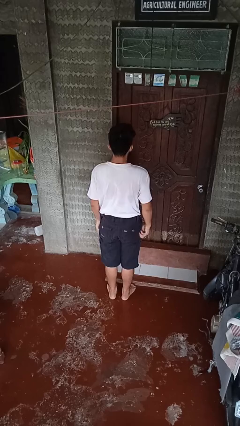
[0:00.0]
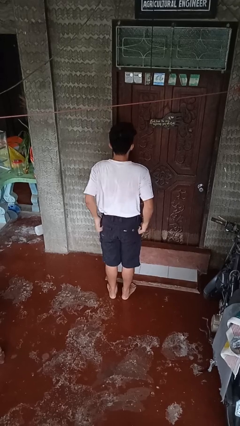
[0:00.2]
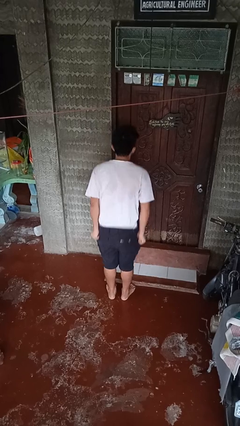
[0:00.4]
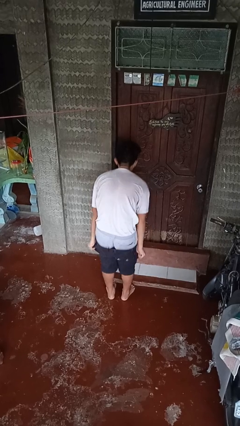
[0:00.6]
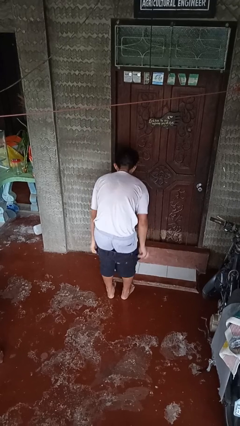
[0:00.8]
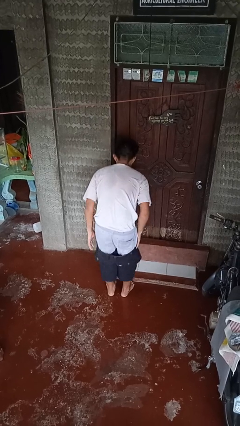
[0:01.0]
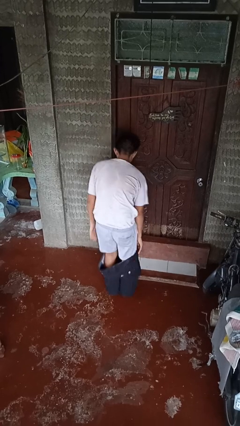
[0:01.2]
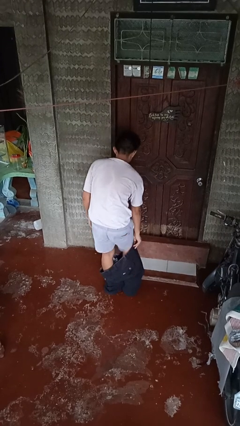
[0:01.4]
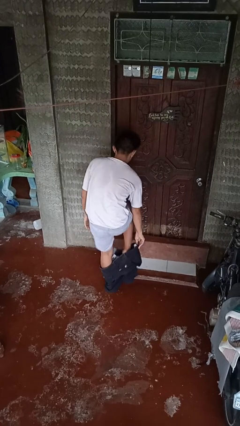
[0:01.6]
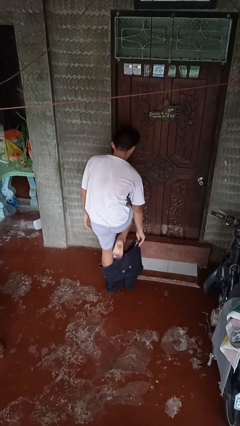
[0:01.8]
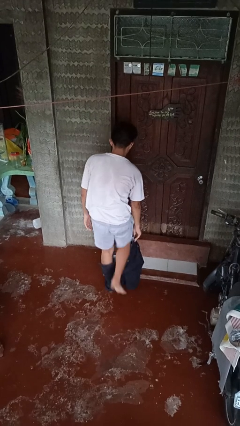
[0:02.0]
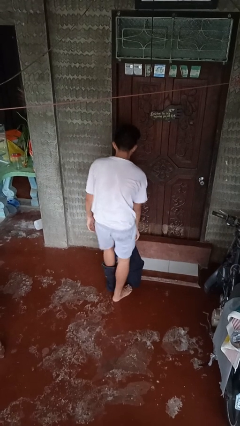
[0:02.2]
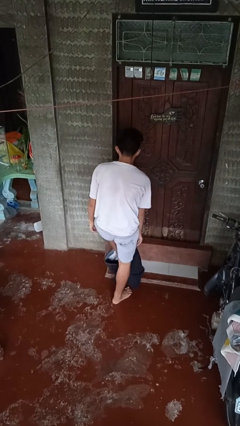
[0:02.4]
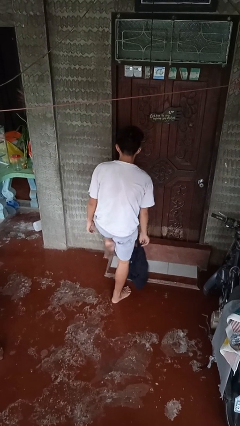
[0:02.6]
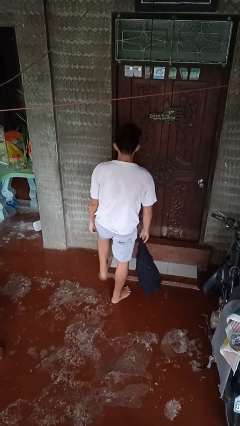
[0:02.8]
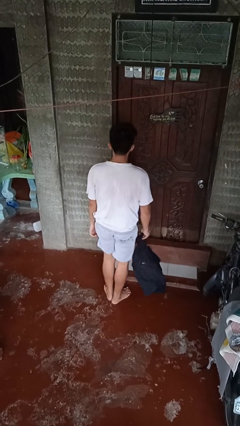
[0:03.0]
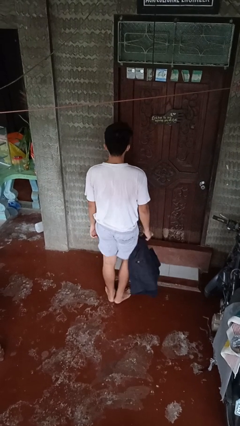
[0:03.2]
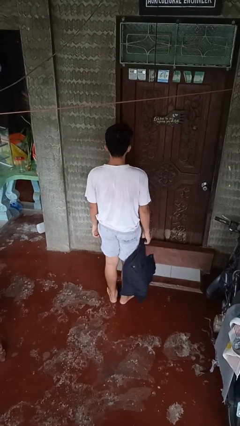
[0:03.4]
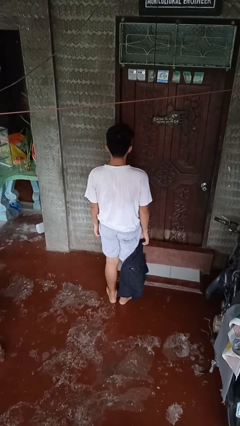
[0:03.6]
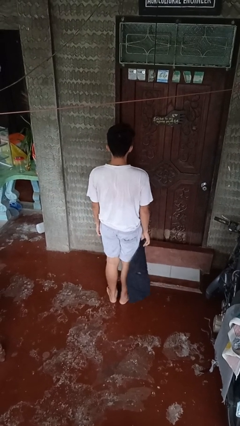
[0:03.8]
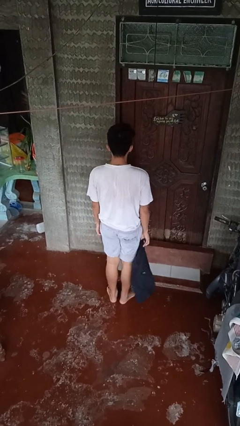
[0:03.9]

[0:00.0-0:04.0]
person takes off pants

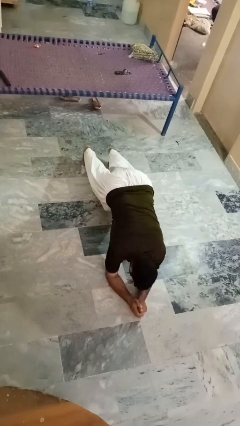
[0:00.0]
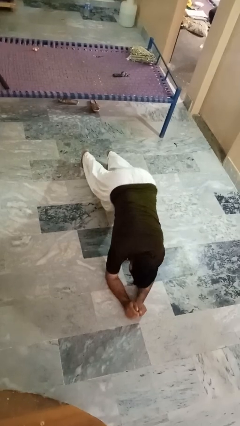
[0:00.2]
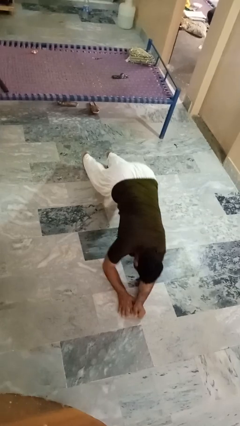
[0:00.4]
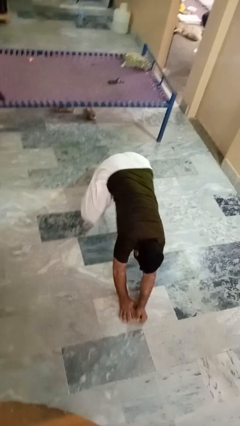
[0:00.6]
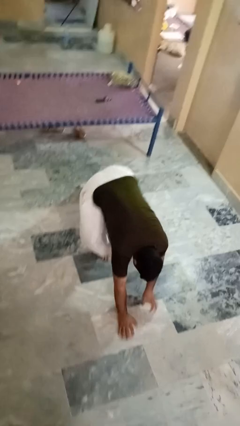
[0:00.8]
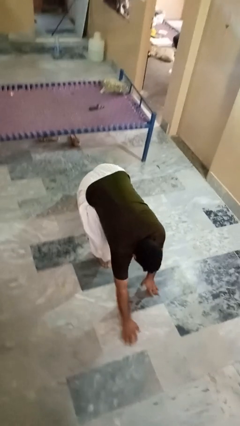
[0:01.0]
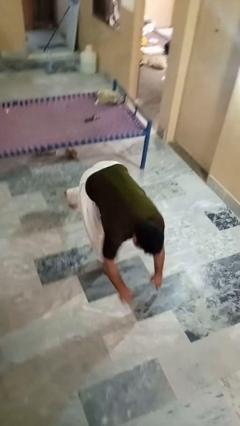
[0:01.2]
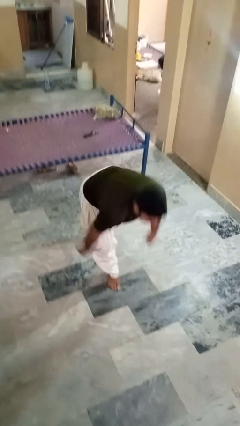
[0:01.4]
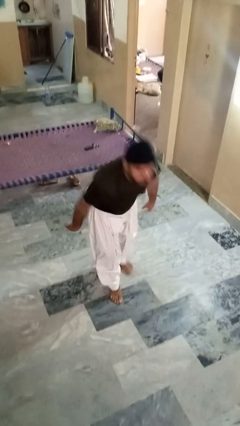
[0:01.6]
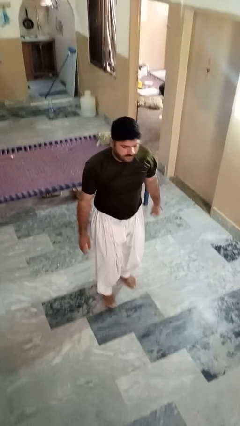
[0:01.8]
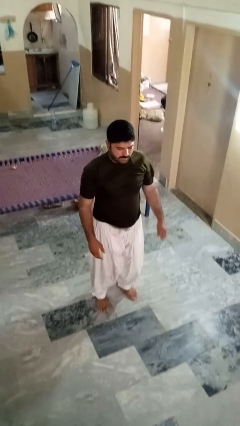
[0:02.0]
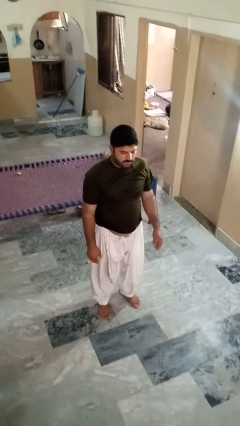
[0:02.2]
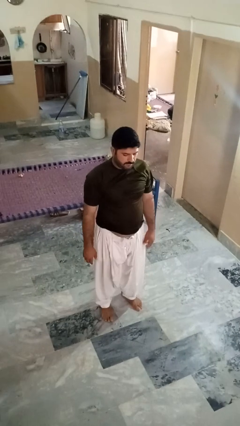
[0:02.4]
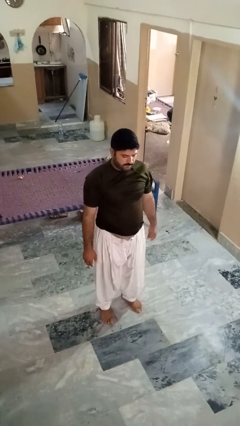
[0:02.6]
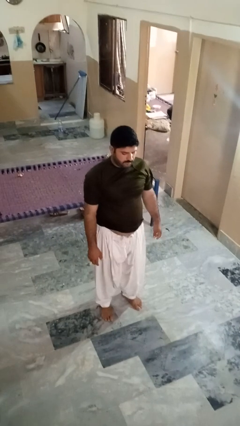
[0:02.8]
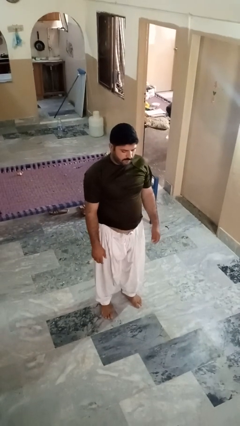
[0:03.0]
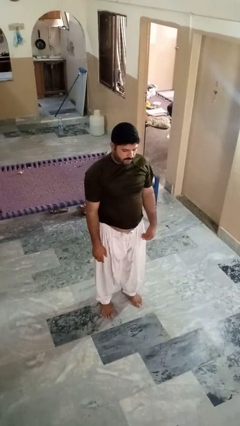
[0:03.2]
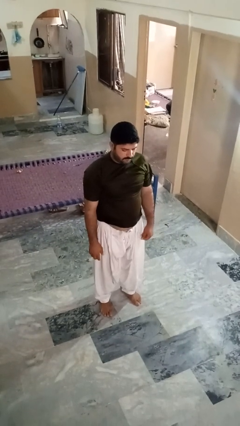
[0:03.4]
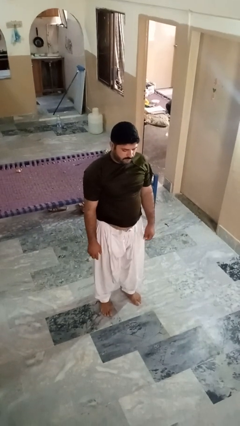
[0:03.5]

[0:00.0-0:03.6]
person stands up from floor

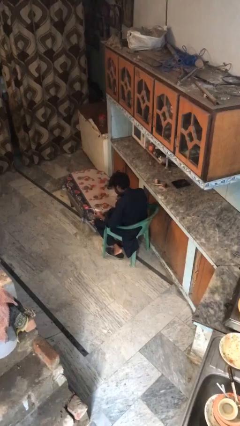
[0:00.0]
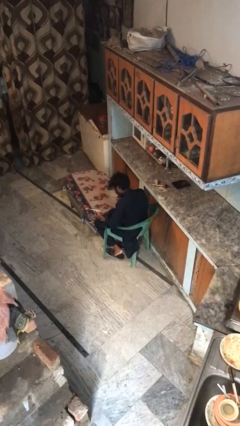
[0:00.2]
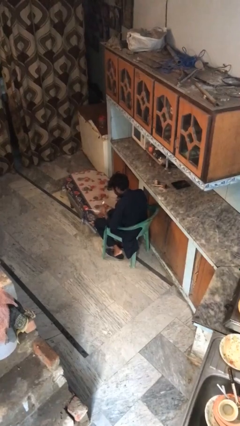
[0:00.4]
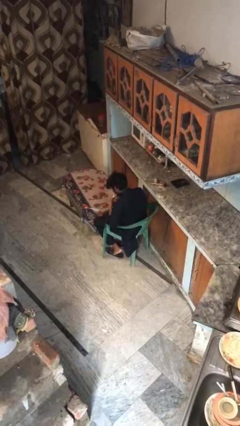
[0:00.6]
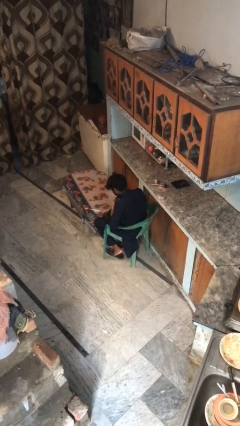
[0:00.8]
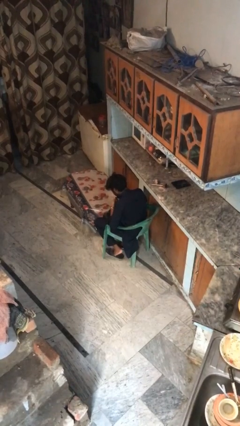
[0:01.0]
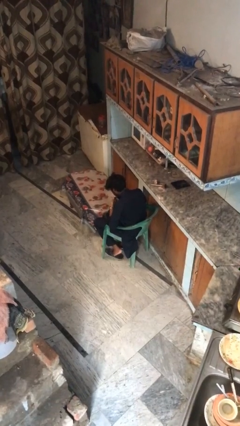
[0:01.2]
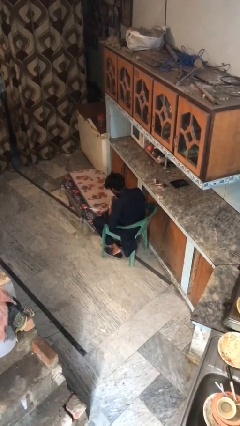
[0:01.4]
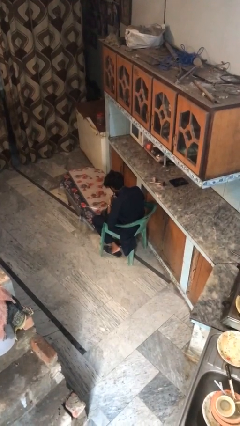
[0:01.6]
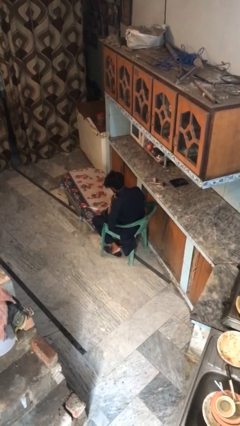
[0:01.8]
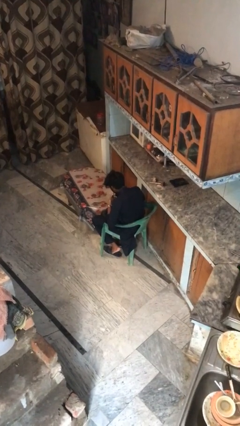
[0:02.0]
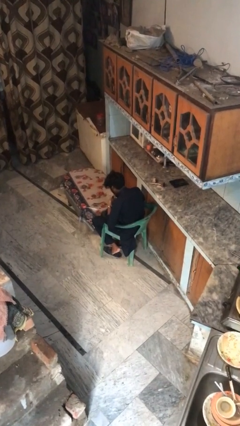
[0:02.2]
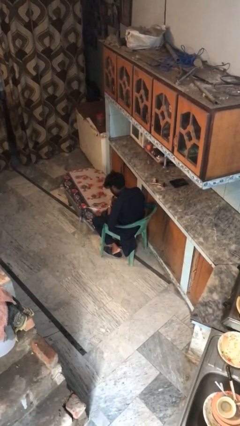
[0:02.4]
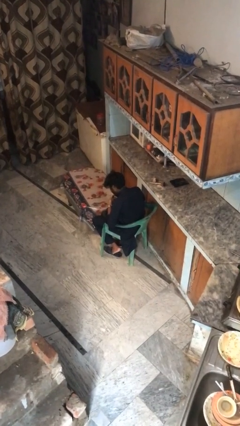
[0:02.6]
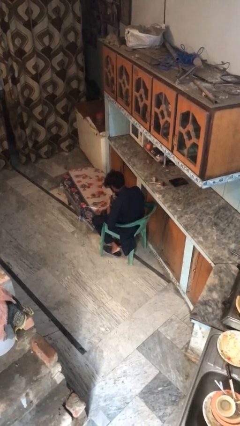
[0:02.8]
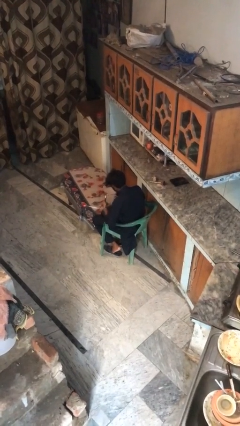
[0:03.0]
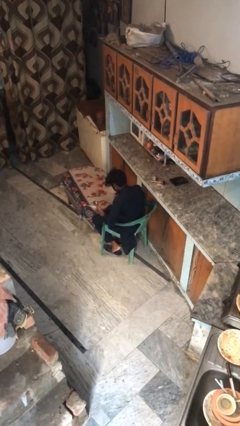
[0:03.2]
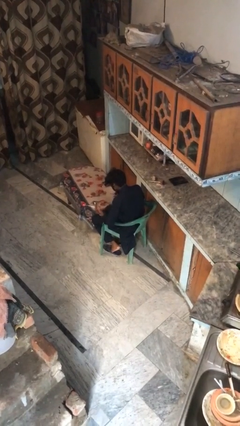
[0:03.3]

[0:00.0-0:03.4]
person applies lip makeup

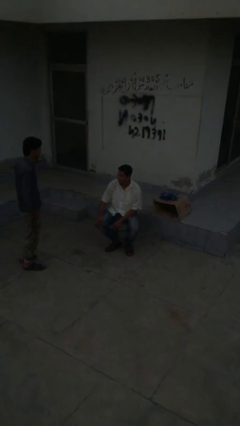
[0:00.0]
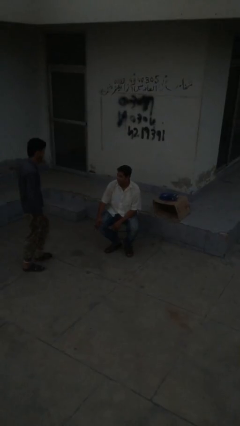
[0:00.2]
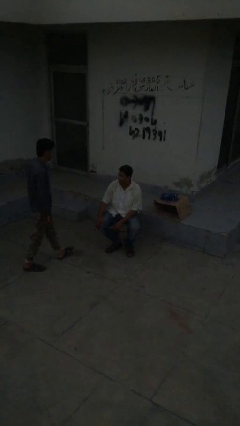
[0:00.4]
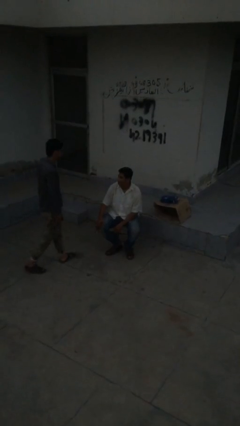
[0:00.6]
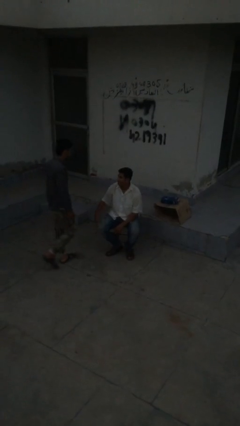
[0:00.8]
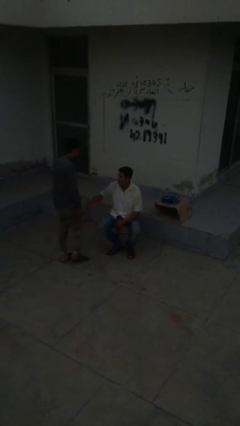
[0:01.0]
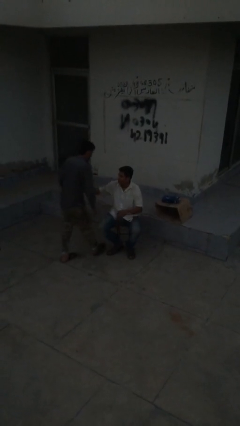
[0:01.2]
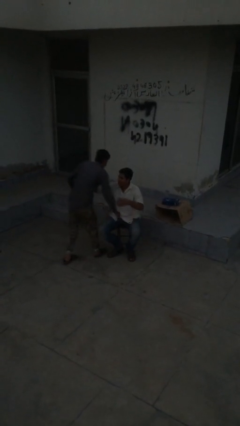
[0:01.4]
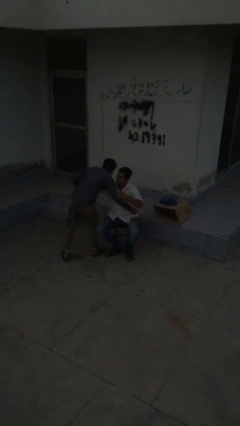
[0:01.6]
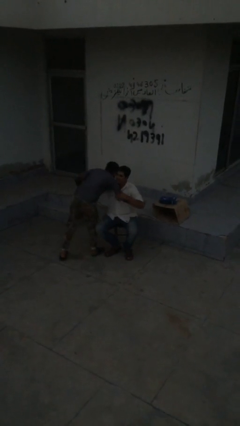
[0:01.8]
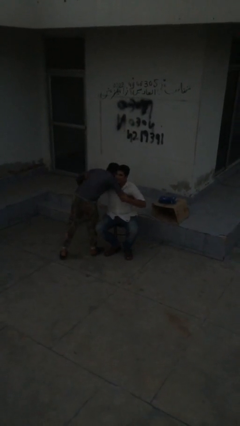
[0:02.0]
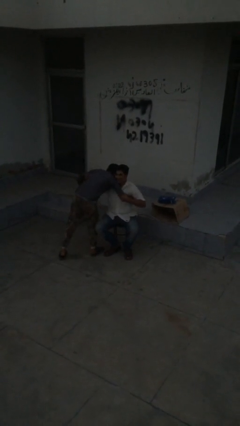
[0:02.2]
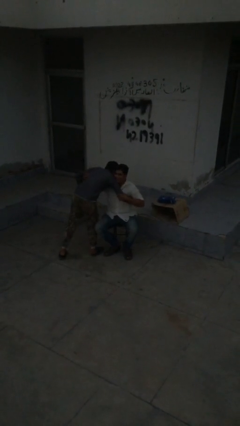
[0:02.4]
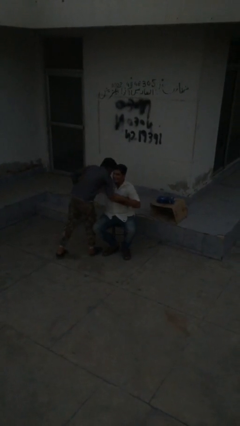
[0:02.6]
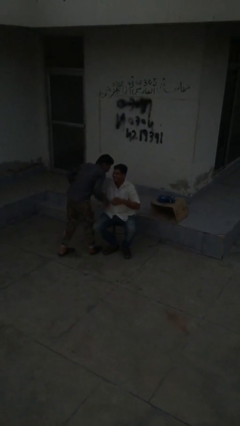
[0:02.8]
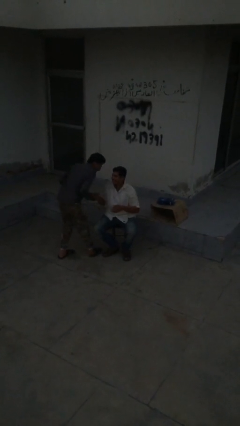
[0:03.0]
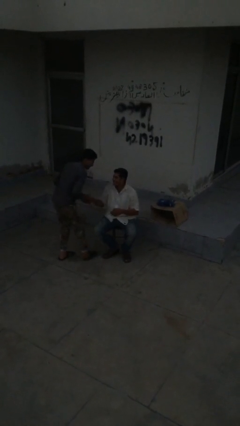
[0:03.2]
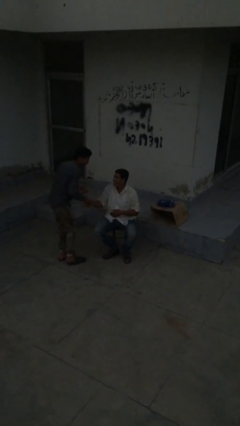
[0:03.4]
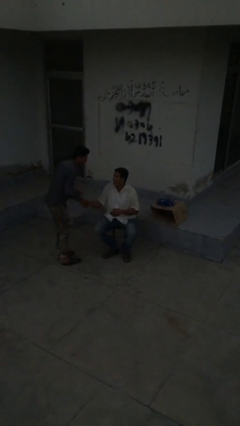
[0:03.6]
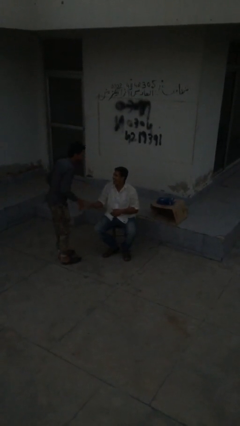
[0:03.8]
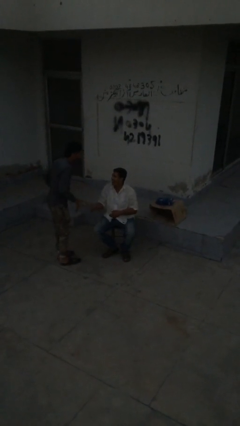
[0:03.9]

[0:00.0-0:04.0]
person embraces person

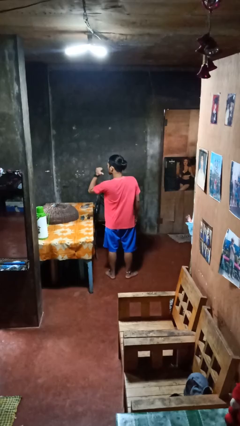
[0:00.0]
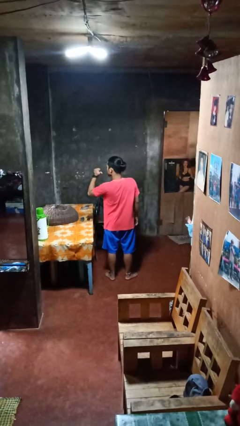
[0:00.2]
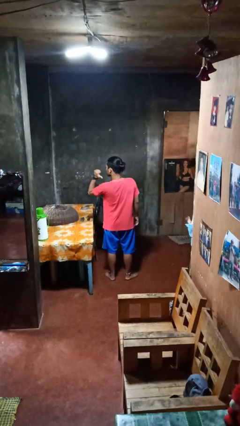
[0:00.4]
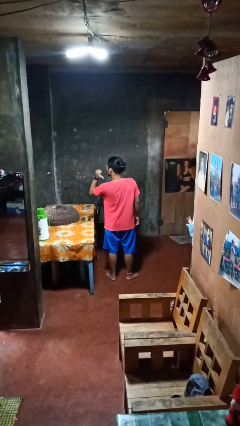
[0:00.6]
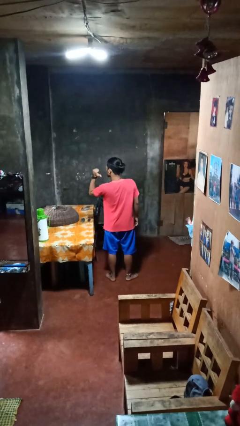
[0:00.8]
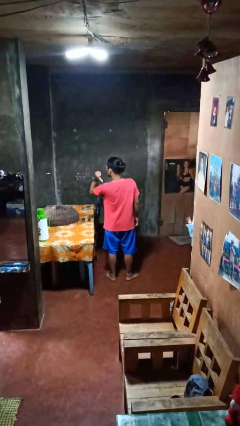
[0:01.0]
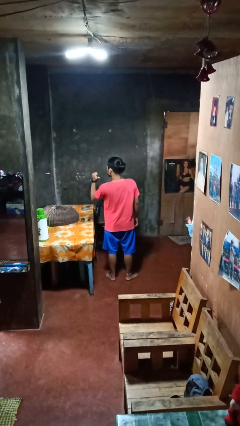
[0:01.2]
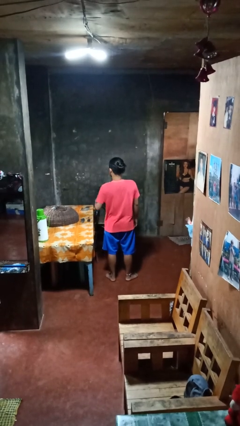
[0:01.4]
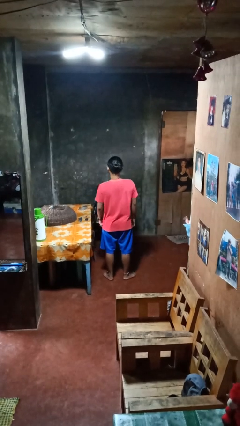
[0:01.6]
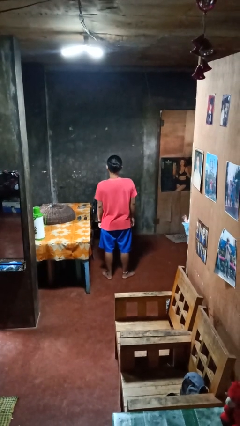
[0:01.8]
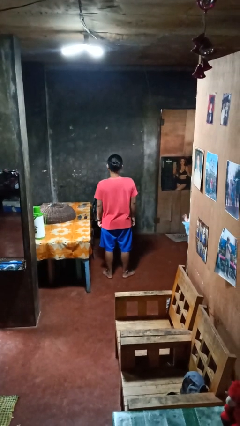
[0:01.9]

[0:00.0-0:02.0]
person gestures behind me

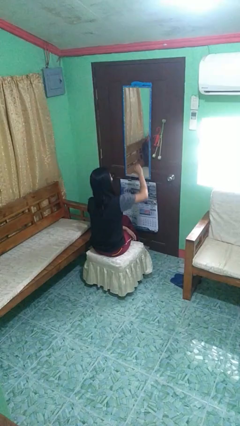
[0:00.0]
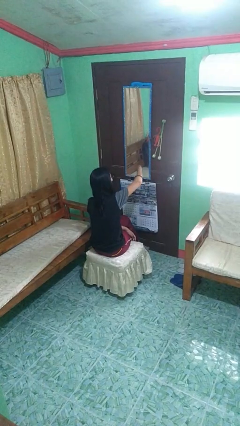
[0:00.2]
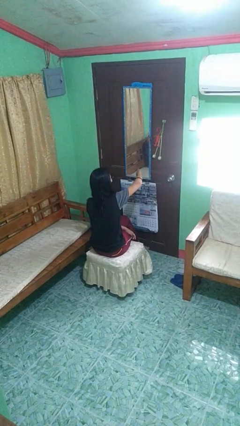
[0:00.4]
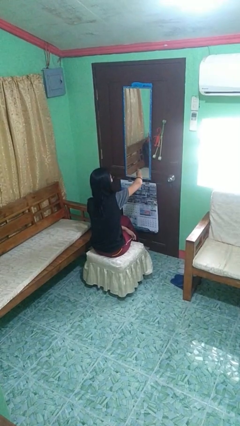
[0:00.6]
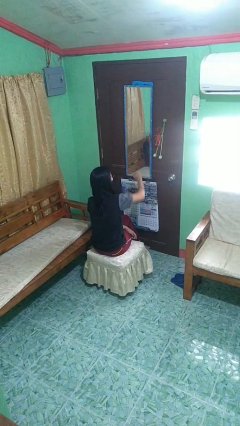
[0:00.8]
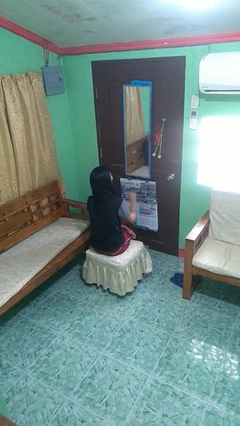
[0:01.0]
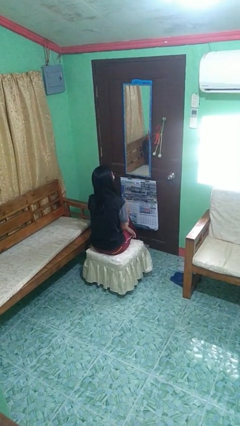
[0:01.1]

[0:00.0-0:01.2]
person gestures thumbs down
